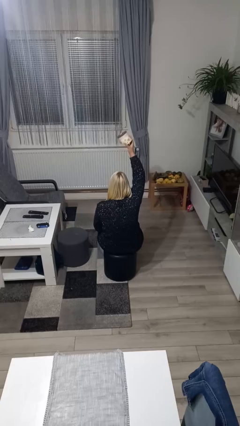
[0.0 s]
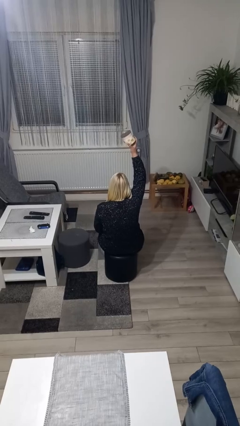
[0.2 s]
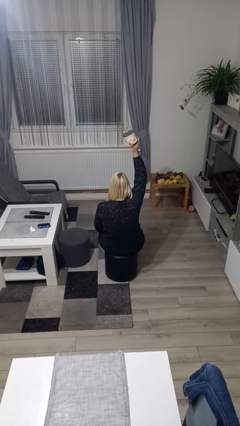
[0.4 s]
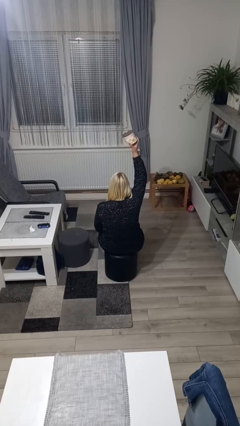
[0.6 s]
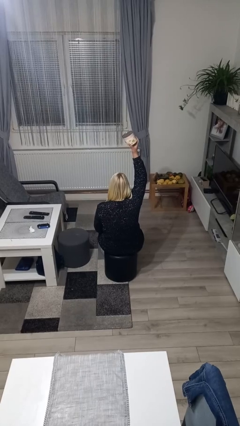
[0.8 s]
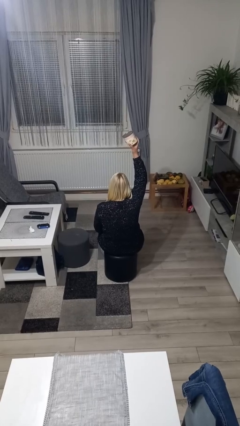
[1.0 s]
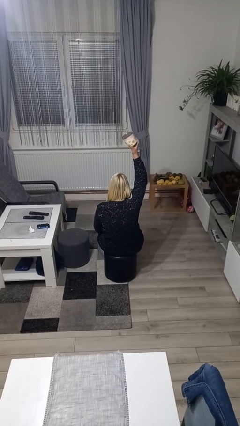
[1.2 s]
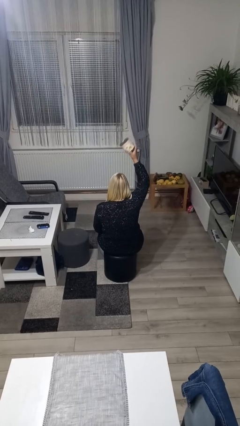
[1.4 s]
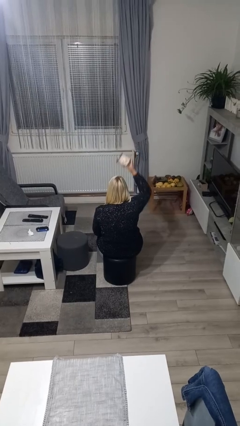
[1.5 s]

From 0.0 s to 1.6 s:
person holds object above head

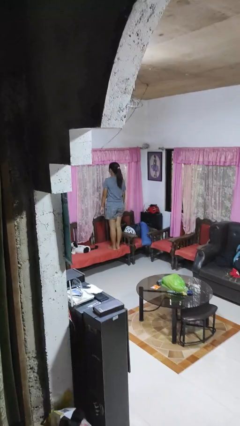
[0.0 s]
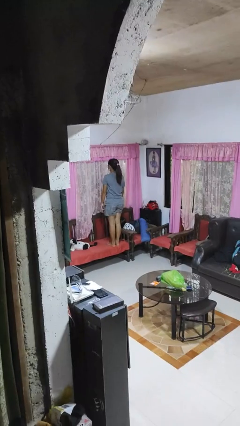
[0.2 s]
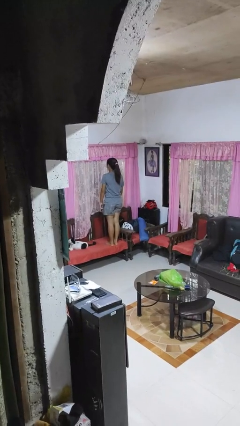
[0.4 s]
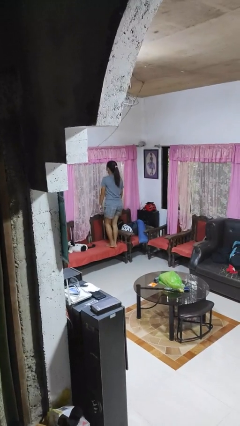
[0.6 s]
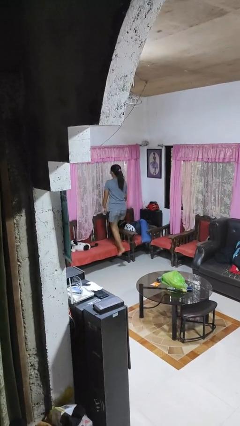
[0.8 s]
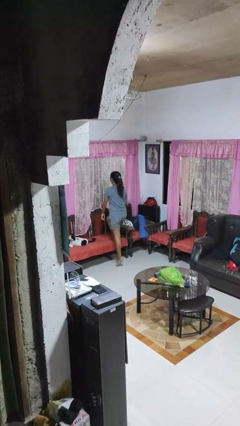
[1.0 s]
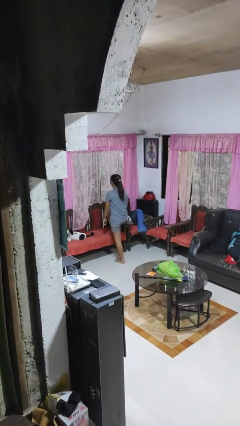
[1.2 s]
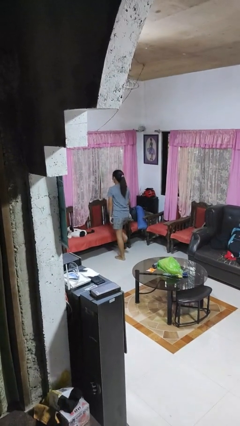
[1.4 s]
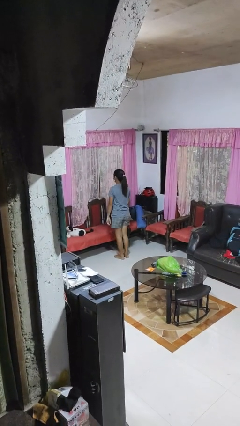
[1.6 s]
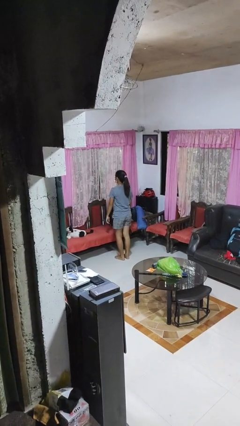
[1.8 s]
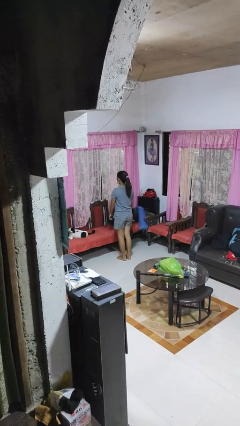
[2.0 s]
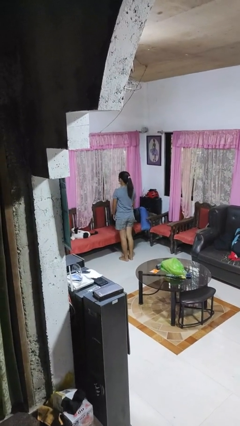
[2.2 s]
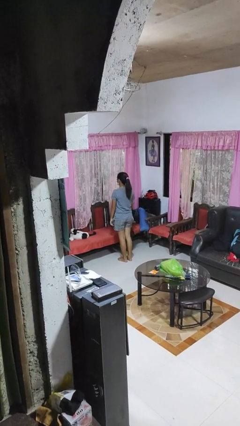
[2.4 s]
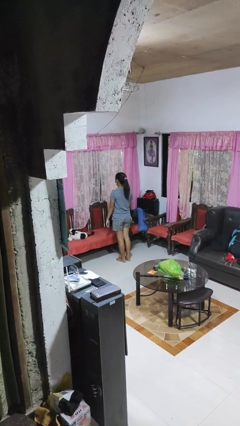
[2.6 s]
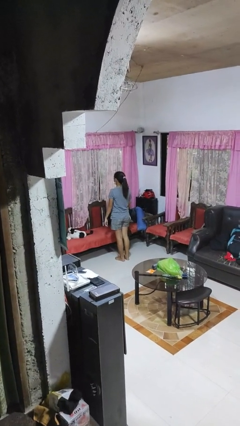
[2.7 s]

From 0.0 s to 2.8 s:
person climbs off chair

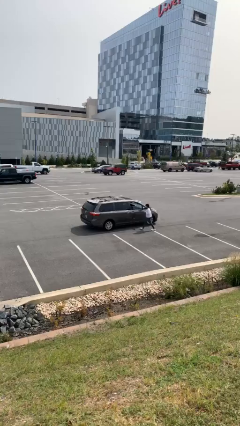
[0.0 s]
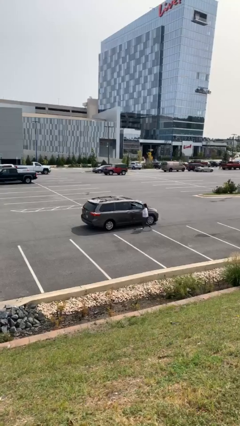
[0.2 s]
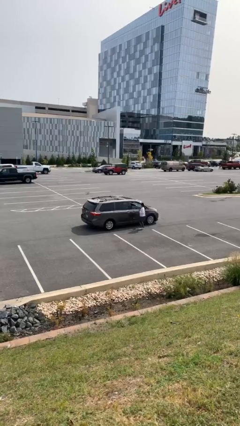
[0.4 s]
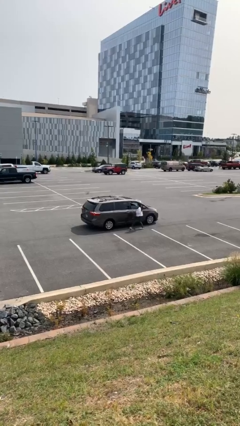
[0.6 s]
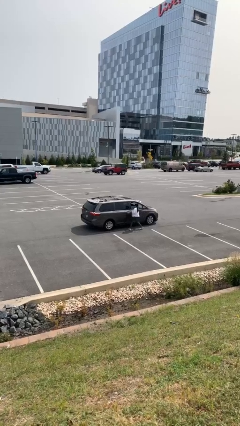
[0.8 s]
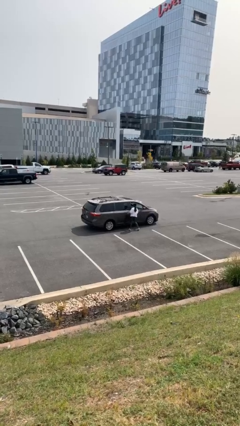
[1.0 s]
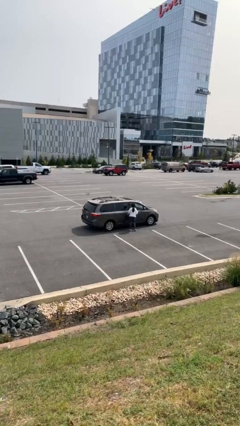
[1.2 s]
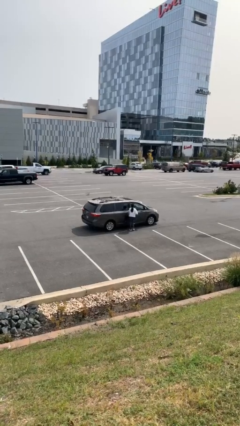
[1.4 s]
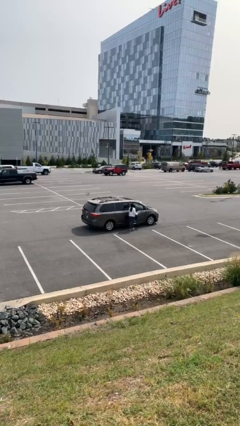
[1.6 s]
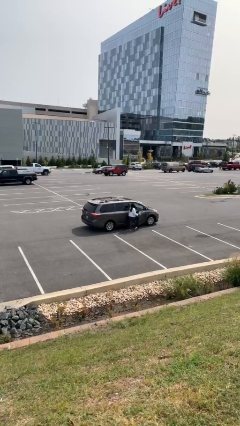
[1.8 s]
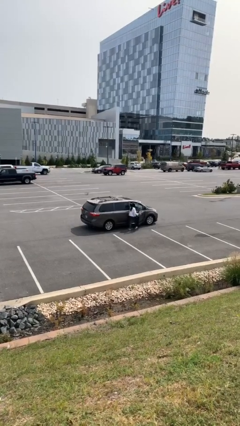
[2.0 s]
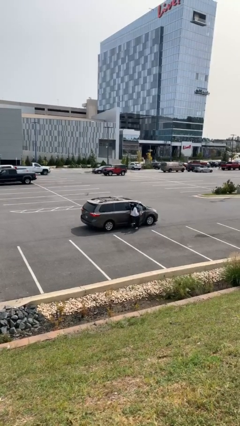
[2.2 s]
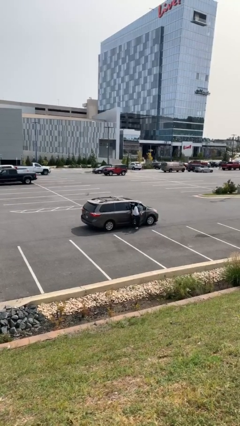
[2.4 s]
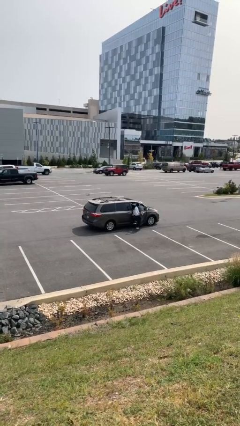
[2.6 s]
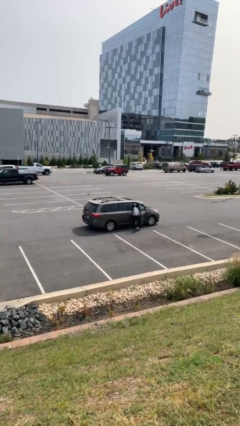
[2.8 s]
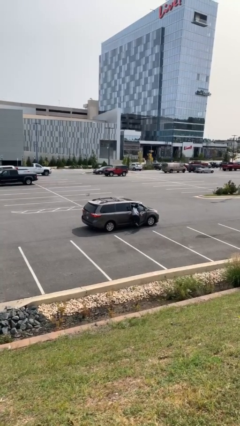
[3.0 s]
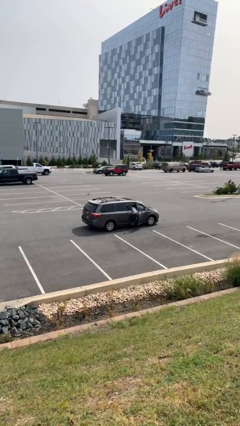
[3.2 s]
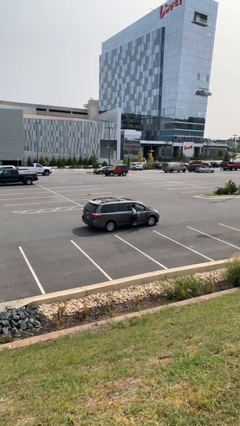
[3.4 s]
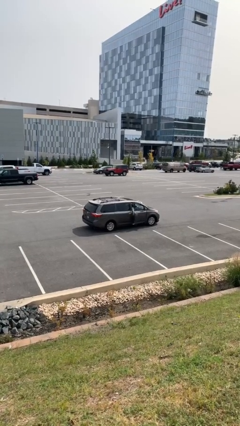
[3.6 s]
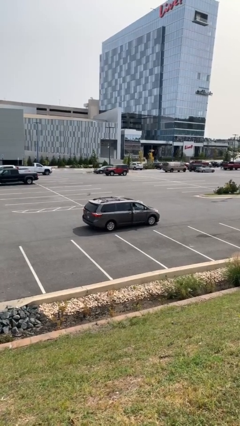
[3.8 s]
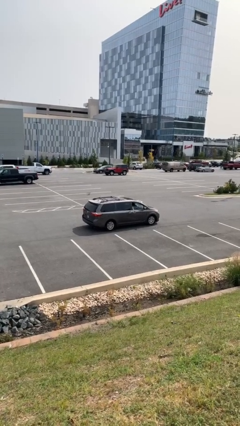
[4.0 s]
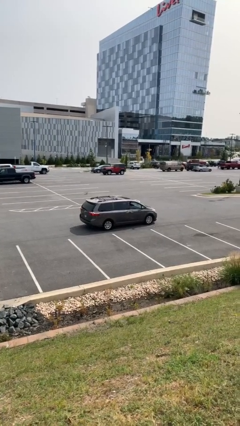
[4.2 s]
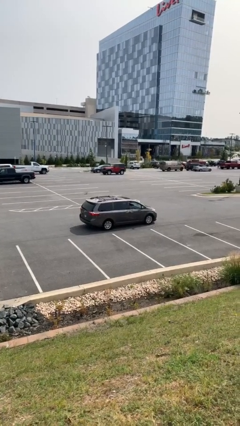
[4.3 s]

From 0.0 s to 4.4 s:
car picks up person

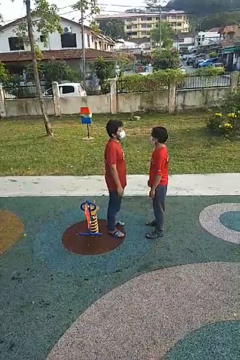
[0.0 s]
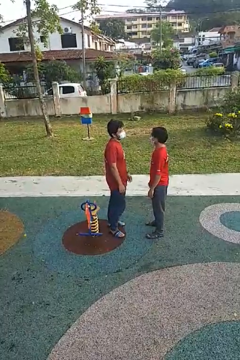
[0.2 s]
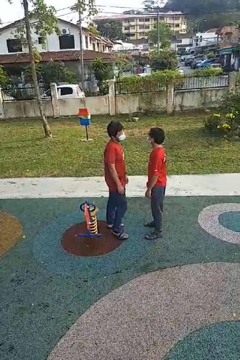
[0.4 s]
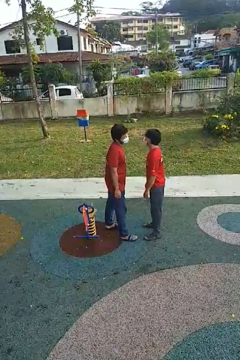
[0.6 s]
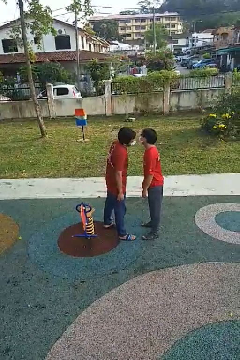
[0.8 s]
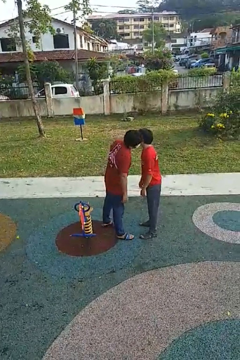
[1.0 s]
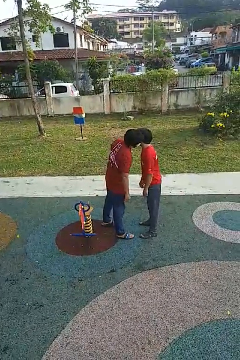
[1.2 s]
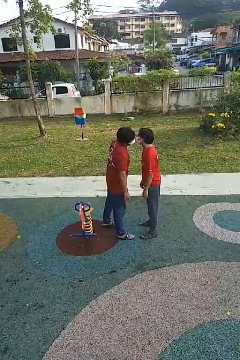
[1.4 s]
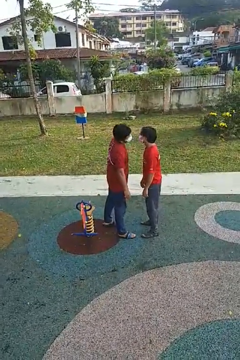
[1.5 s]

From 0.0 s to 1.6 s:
person kisses cheek of person

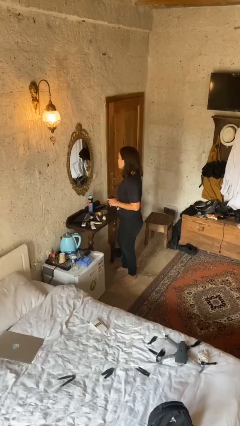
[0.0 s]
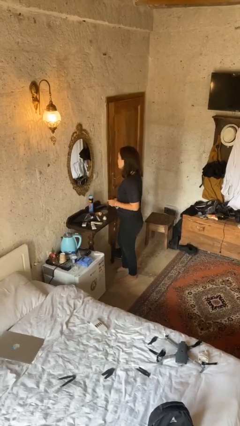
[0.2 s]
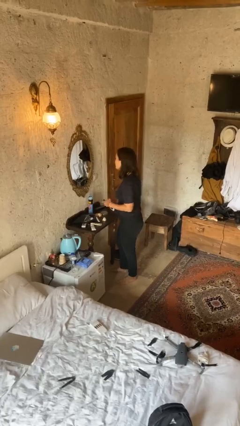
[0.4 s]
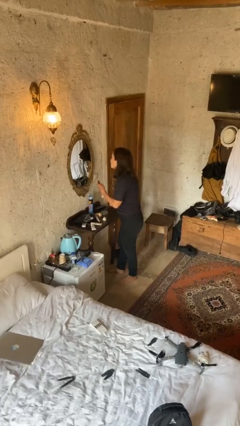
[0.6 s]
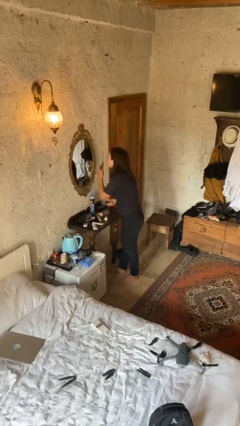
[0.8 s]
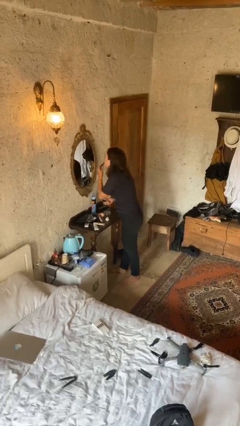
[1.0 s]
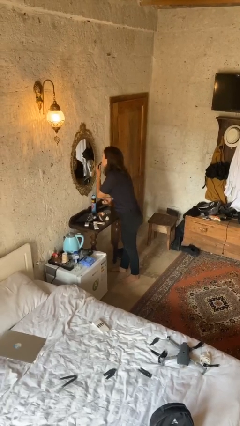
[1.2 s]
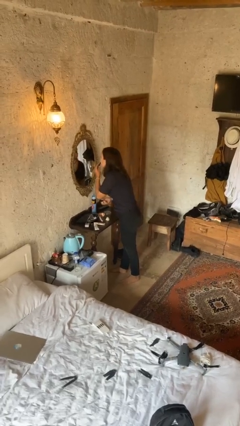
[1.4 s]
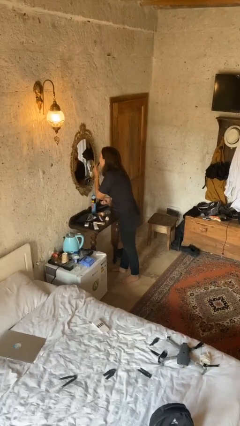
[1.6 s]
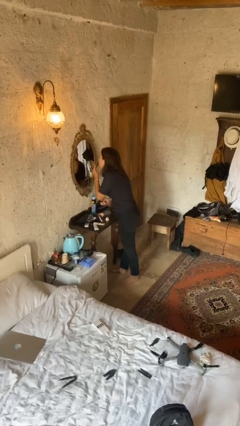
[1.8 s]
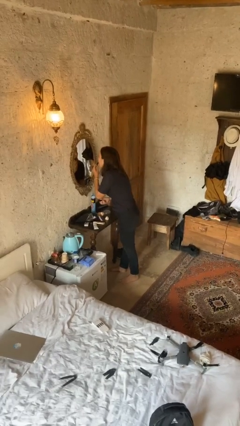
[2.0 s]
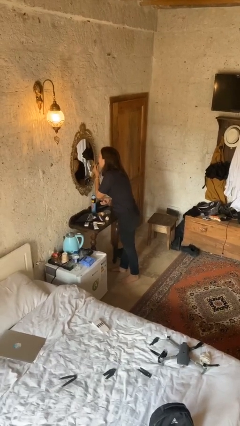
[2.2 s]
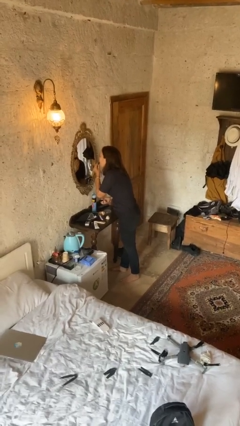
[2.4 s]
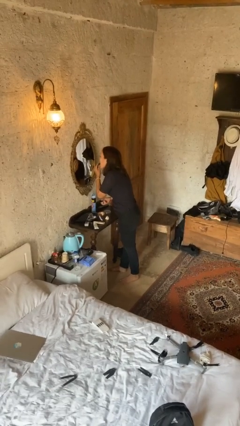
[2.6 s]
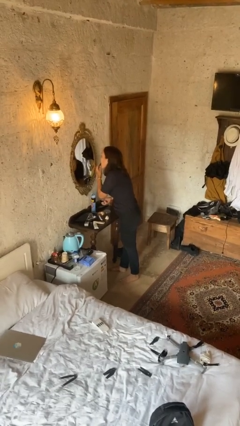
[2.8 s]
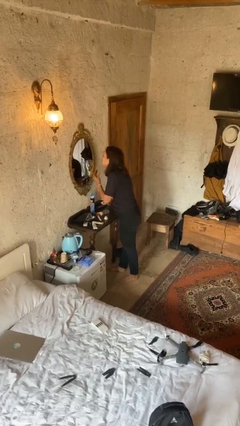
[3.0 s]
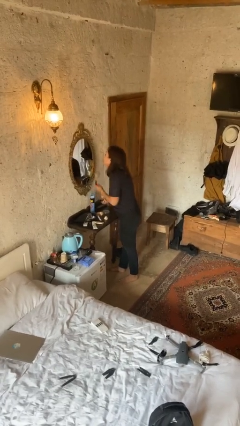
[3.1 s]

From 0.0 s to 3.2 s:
person applies lip makeup

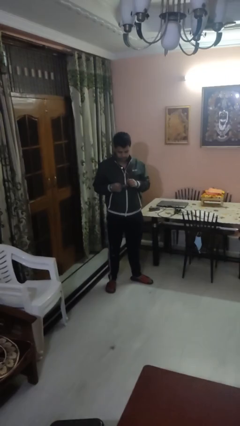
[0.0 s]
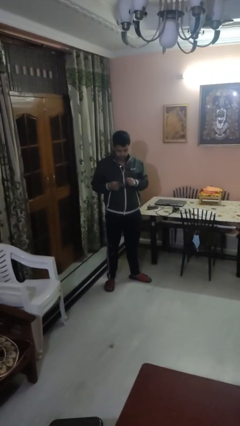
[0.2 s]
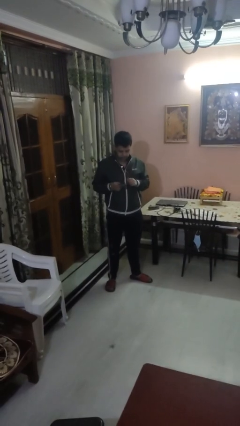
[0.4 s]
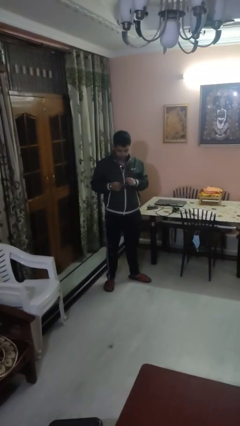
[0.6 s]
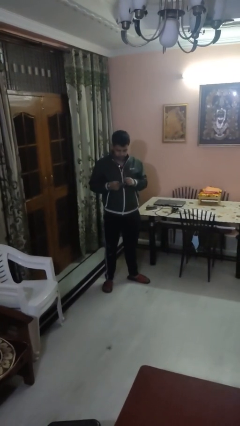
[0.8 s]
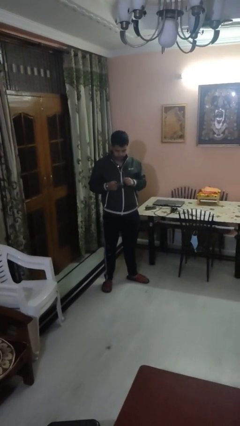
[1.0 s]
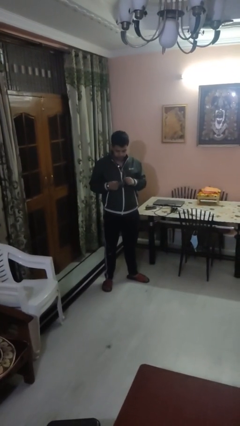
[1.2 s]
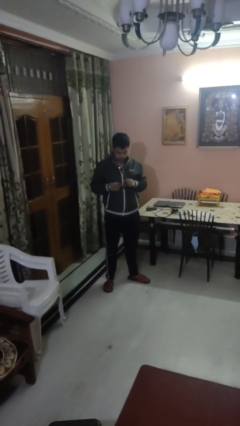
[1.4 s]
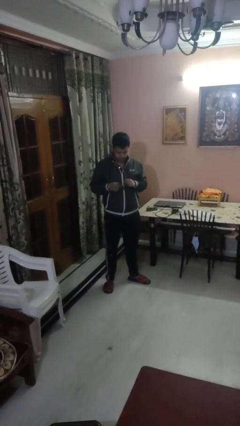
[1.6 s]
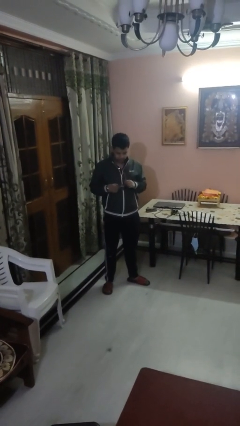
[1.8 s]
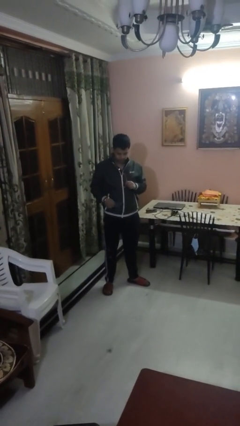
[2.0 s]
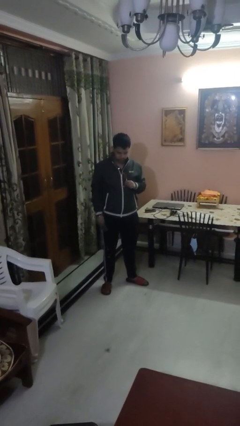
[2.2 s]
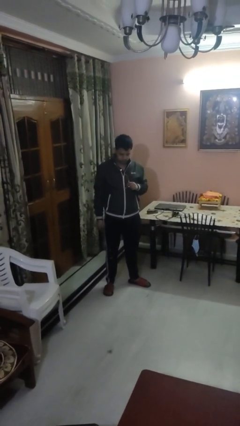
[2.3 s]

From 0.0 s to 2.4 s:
person cleans eyeglasses

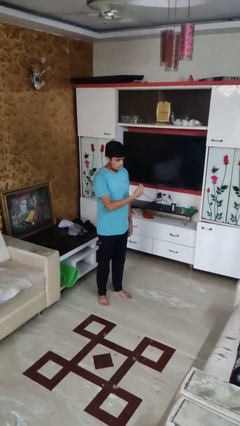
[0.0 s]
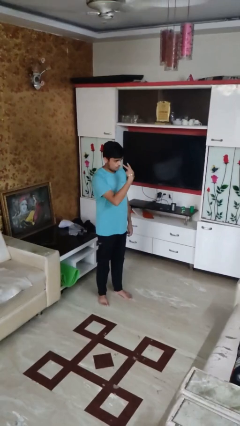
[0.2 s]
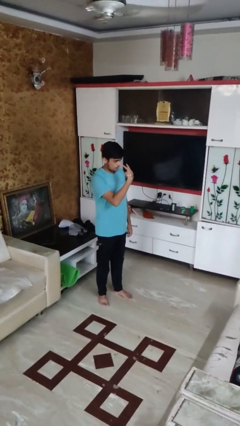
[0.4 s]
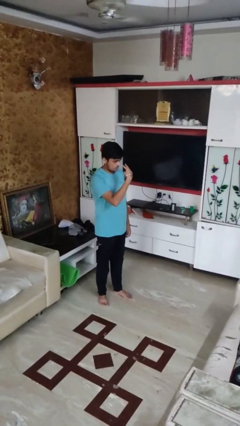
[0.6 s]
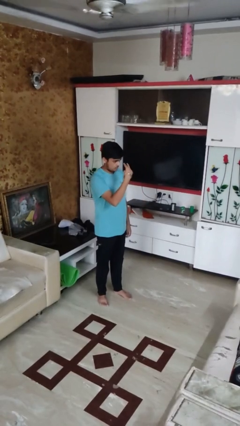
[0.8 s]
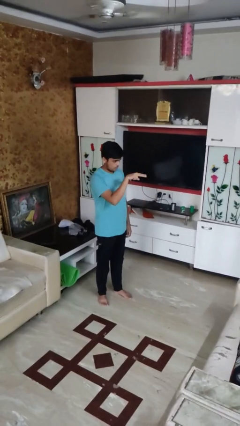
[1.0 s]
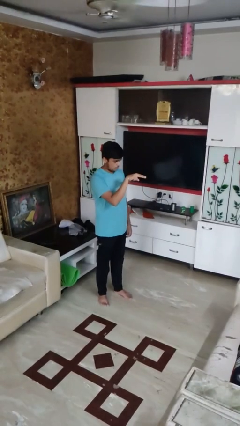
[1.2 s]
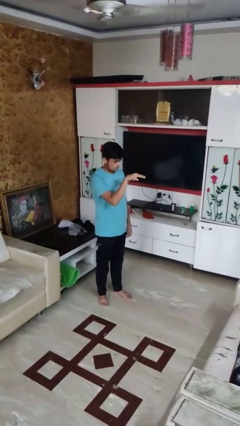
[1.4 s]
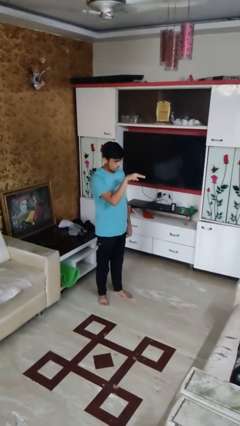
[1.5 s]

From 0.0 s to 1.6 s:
person gestures watch closely
